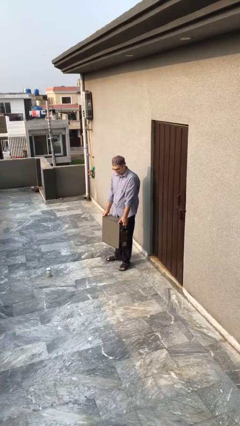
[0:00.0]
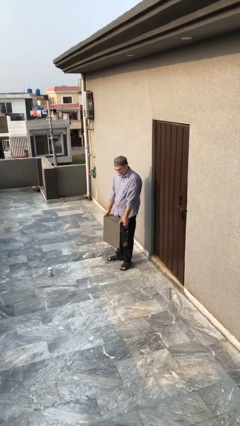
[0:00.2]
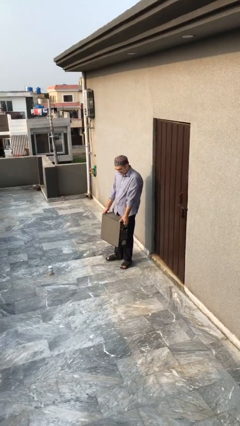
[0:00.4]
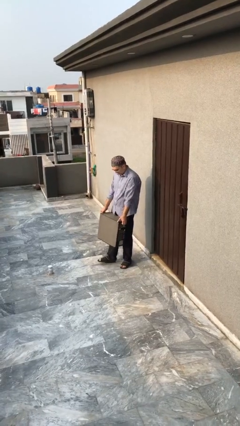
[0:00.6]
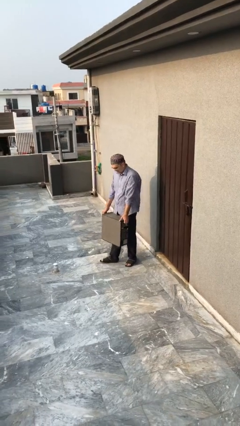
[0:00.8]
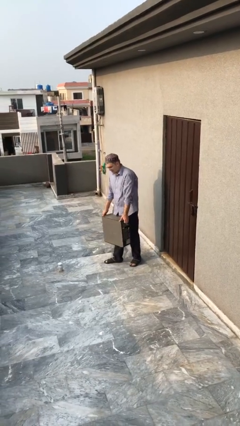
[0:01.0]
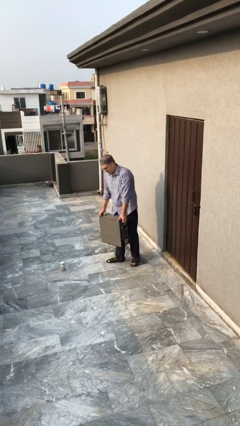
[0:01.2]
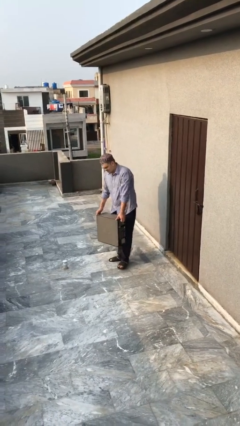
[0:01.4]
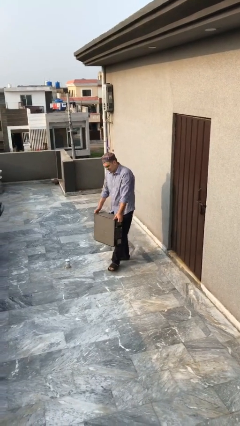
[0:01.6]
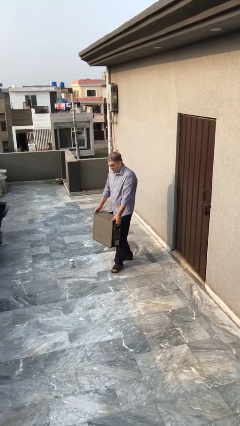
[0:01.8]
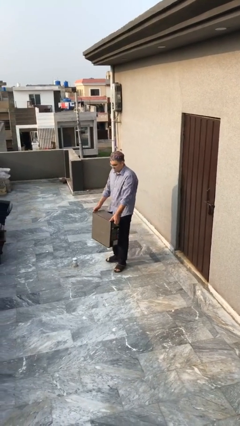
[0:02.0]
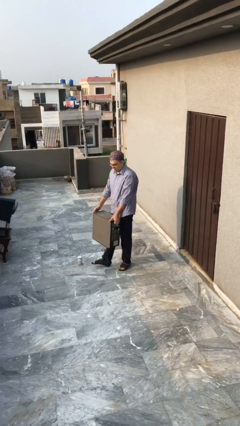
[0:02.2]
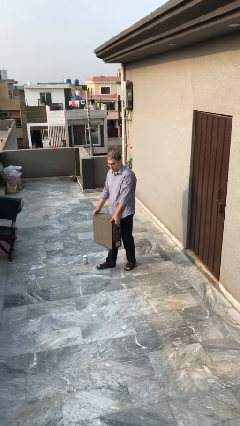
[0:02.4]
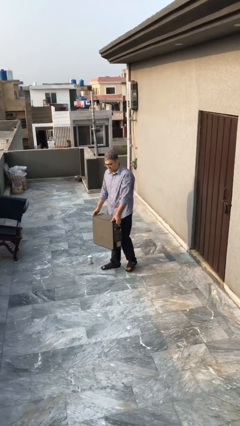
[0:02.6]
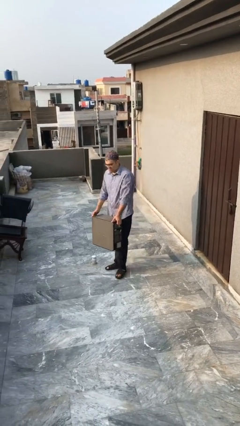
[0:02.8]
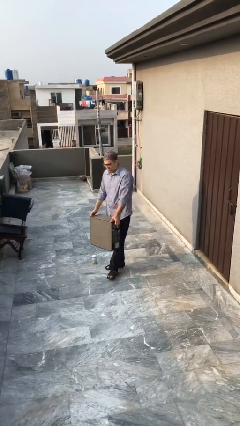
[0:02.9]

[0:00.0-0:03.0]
person carries heavy object

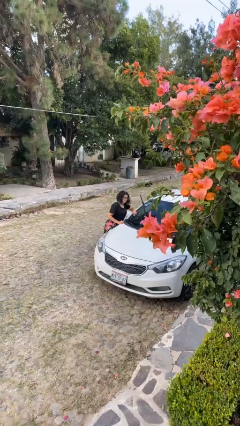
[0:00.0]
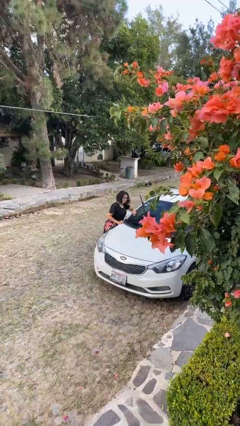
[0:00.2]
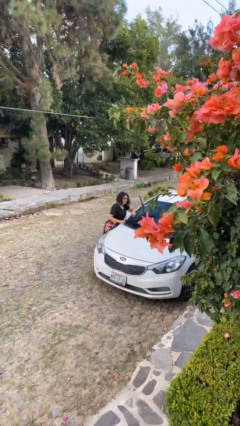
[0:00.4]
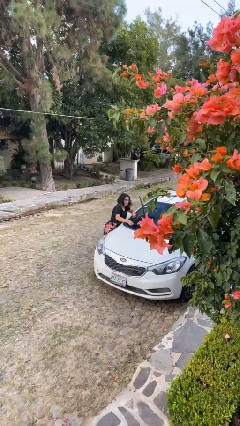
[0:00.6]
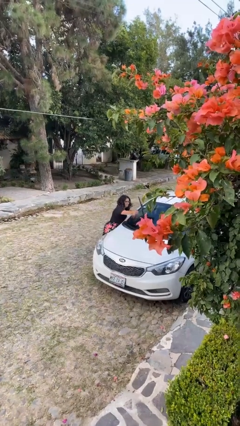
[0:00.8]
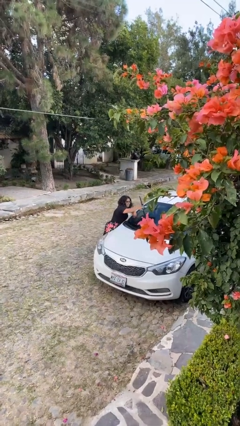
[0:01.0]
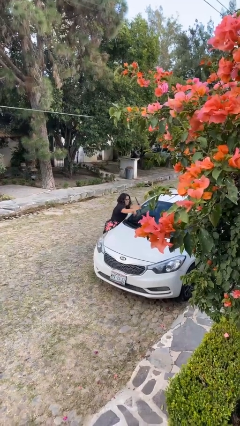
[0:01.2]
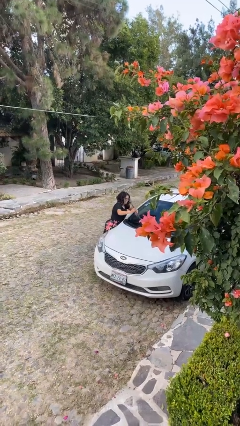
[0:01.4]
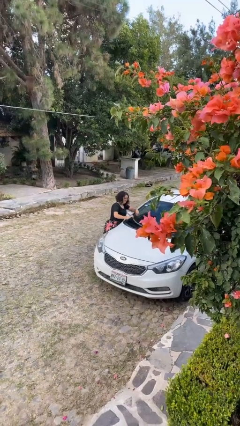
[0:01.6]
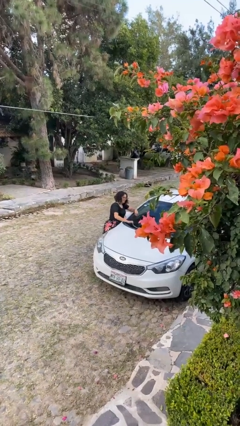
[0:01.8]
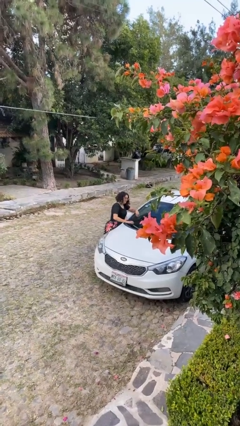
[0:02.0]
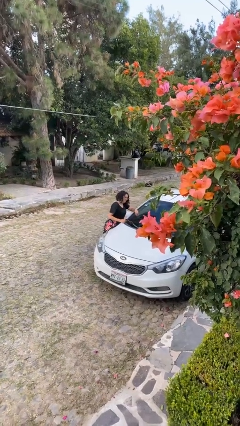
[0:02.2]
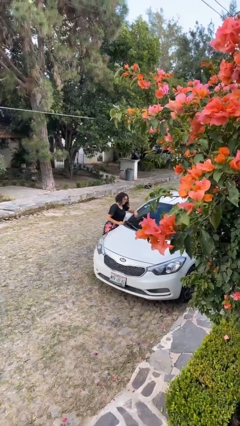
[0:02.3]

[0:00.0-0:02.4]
person flips down car wipers

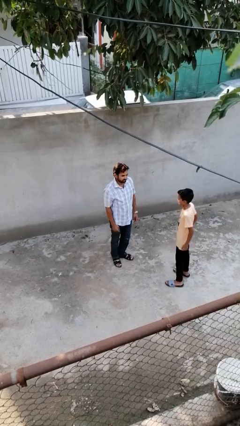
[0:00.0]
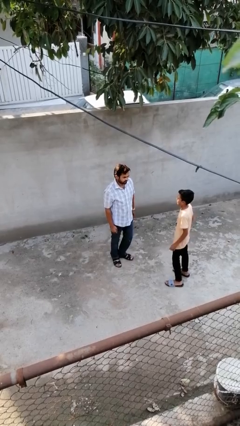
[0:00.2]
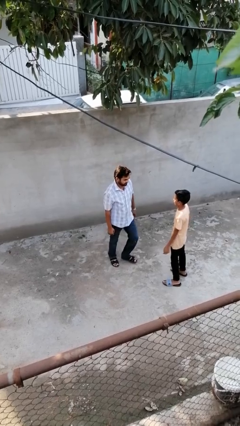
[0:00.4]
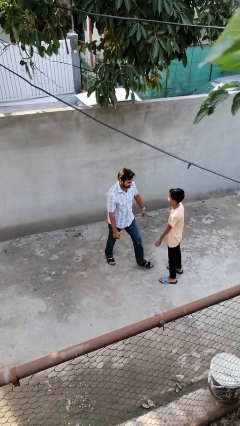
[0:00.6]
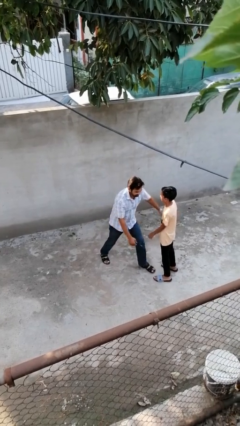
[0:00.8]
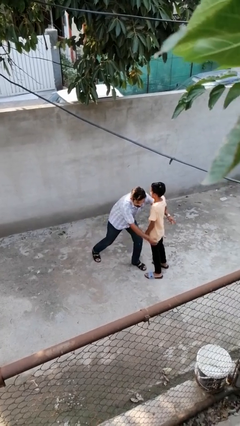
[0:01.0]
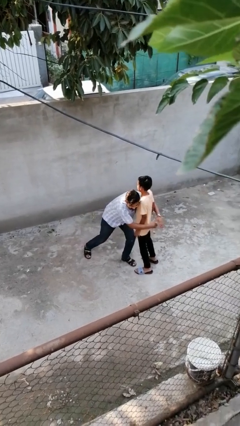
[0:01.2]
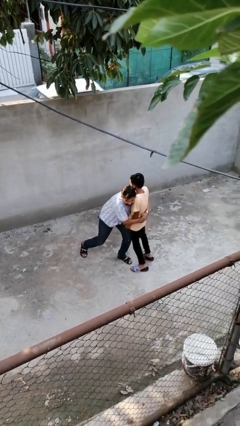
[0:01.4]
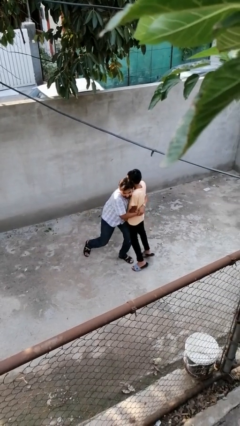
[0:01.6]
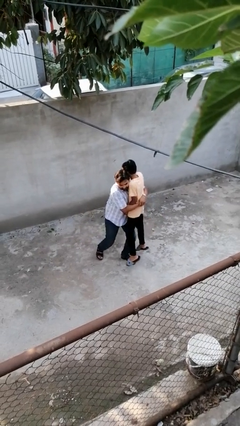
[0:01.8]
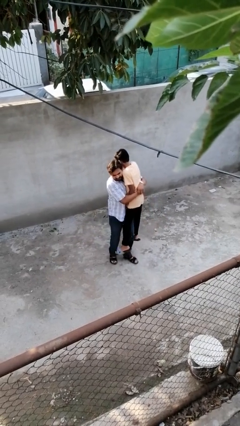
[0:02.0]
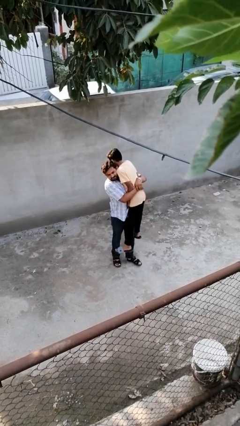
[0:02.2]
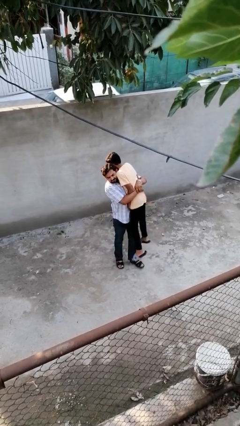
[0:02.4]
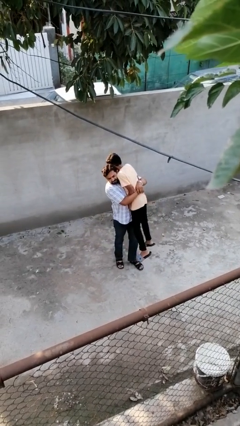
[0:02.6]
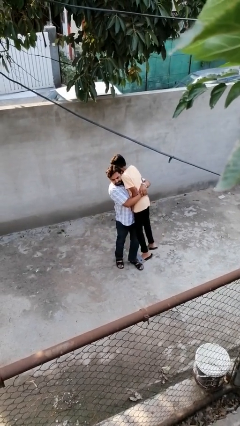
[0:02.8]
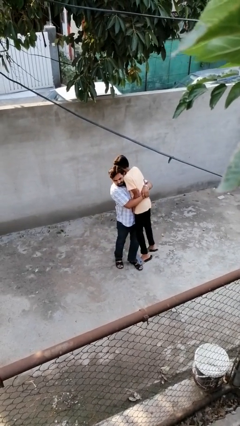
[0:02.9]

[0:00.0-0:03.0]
person picks up person

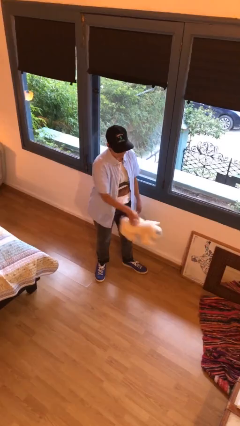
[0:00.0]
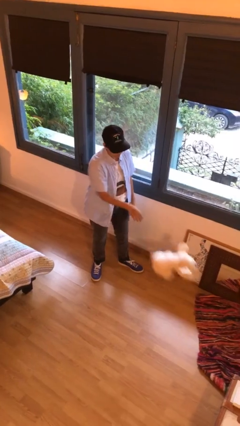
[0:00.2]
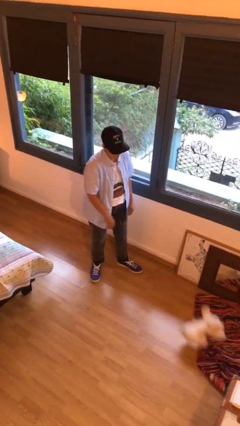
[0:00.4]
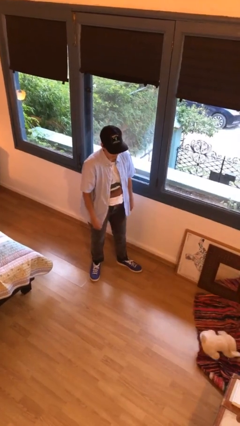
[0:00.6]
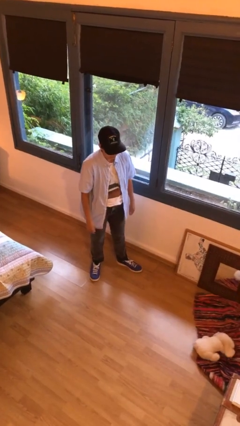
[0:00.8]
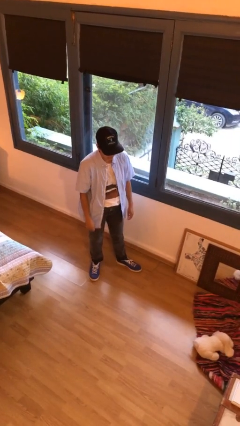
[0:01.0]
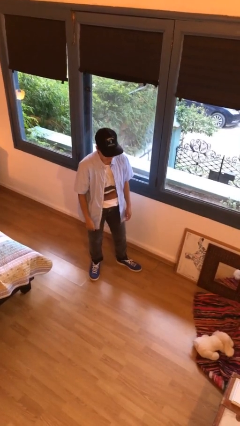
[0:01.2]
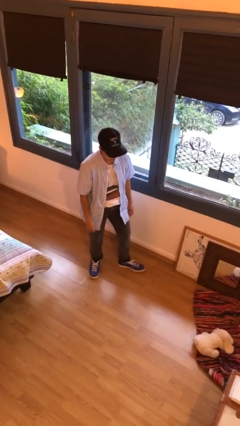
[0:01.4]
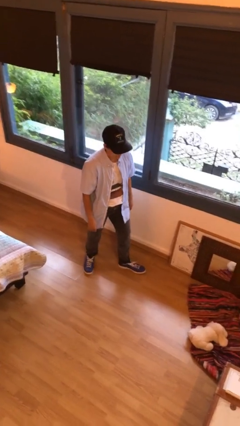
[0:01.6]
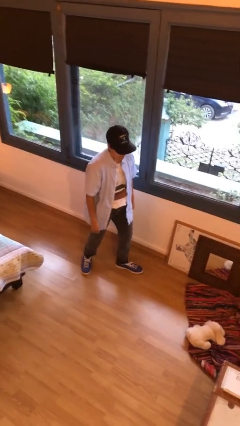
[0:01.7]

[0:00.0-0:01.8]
person throws object to ground

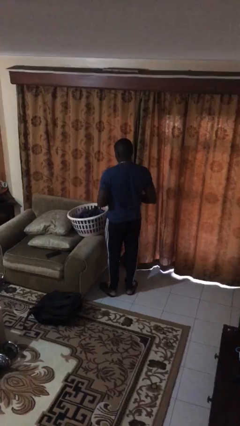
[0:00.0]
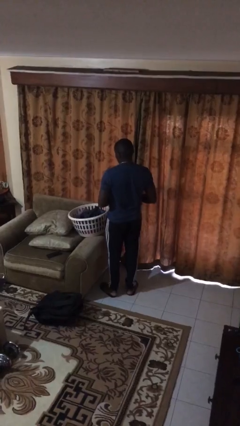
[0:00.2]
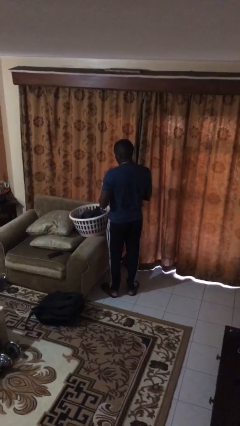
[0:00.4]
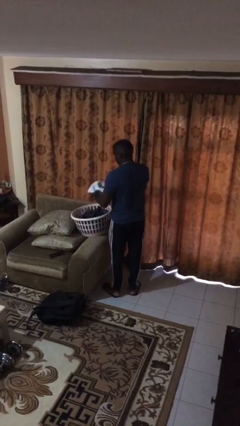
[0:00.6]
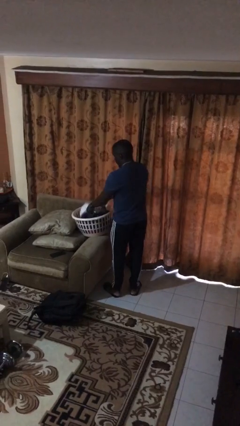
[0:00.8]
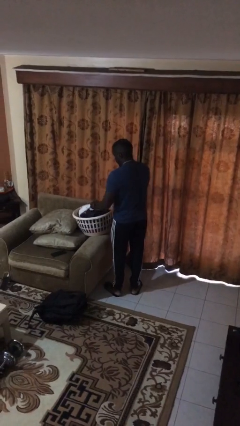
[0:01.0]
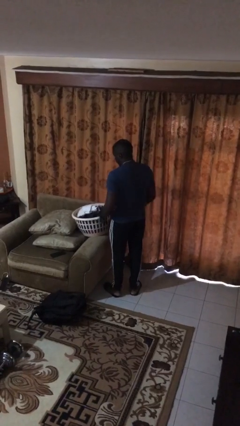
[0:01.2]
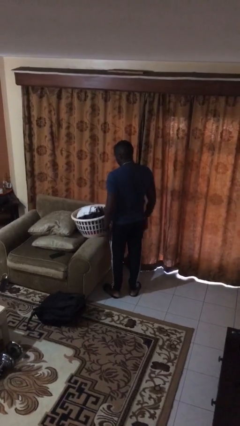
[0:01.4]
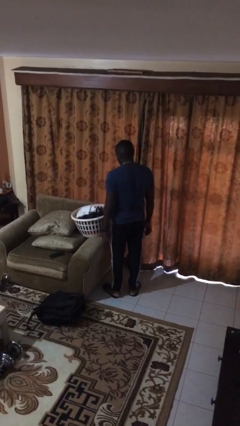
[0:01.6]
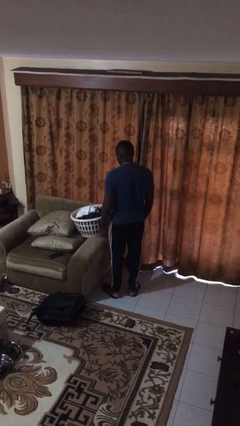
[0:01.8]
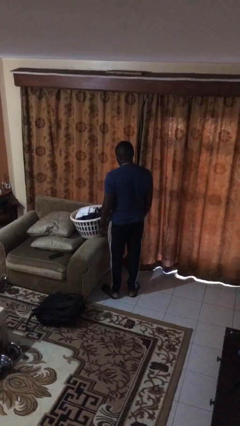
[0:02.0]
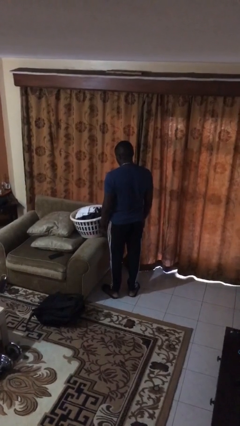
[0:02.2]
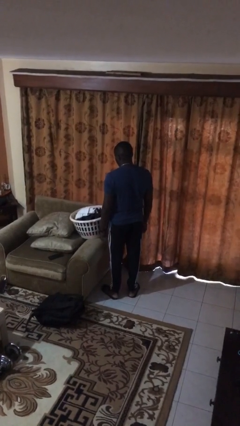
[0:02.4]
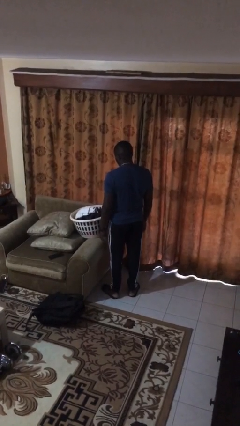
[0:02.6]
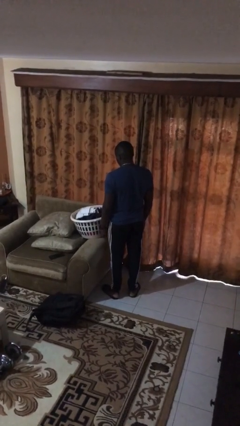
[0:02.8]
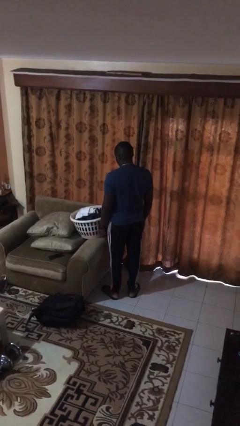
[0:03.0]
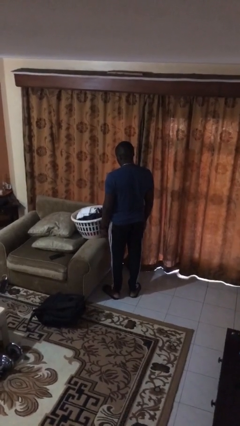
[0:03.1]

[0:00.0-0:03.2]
person puts object into basket

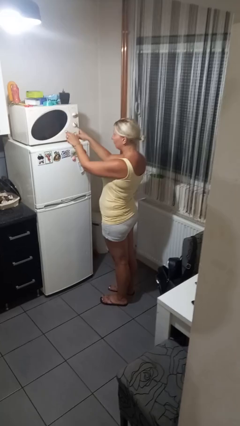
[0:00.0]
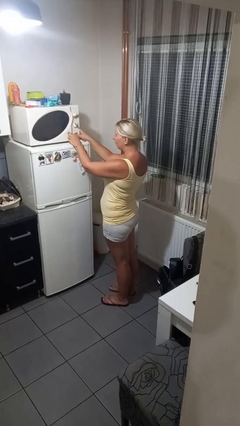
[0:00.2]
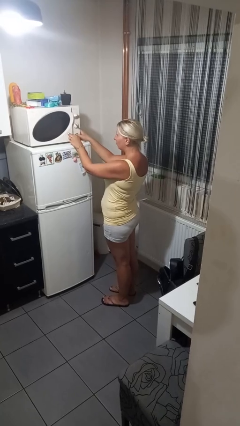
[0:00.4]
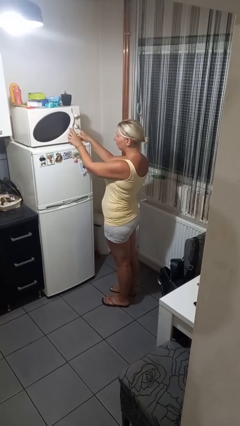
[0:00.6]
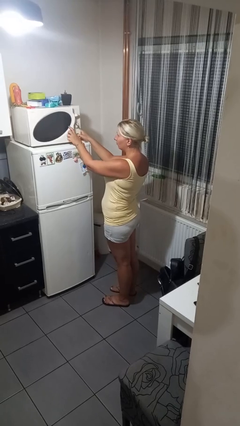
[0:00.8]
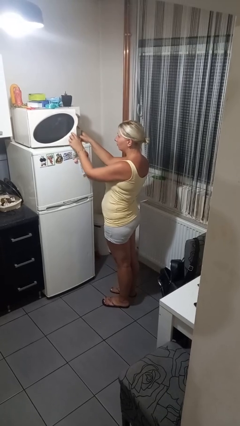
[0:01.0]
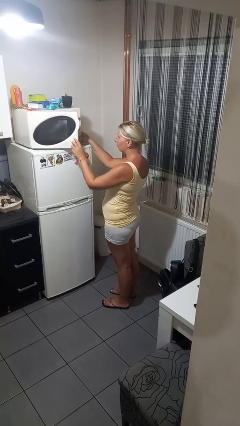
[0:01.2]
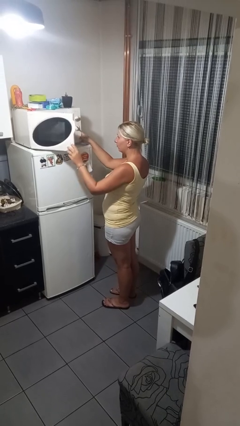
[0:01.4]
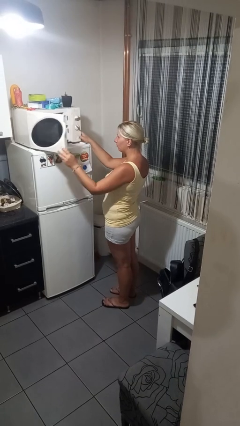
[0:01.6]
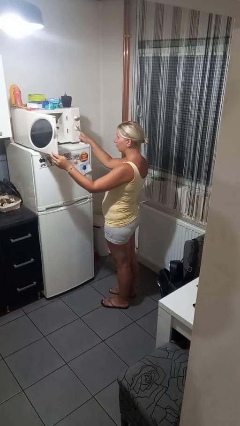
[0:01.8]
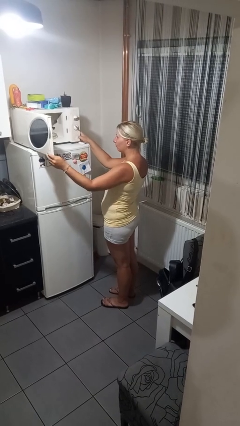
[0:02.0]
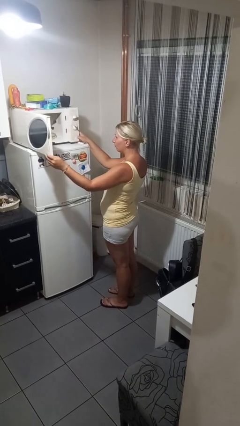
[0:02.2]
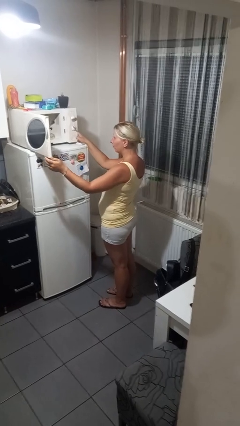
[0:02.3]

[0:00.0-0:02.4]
person opens microwave

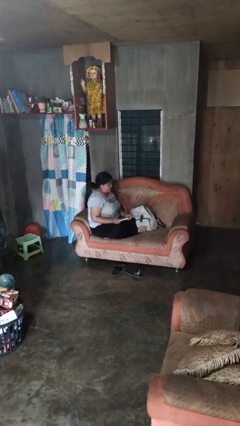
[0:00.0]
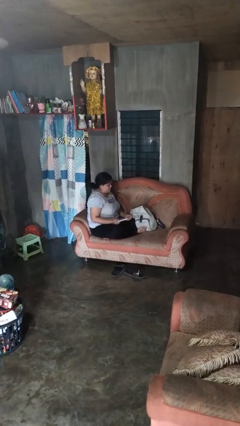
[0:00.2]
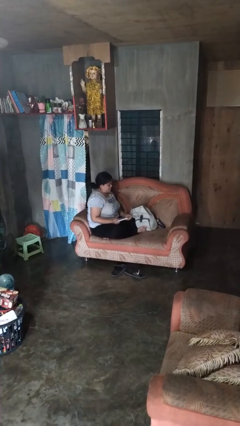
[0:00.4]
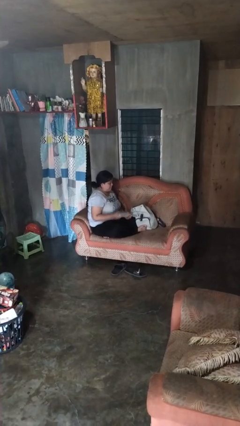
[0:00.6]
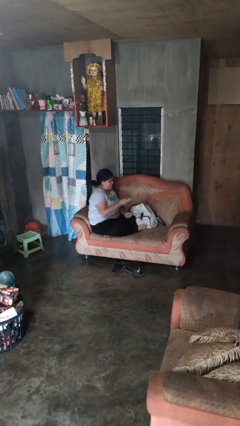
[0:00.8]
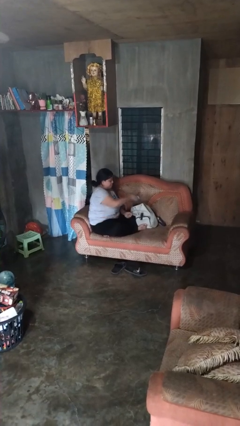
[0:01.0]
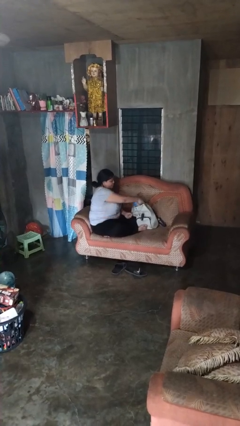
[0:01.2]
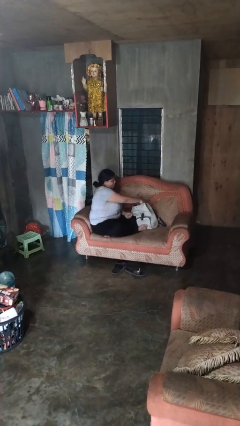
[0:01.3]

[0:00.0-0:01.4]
person puts object into backpack
